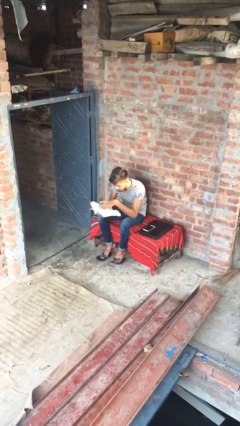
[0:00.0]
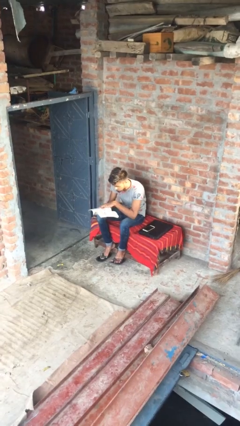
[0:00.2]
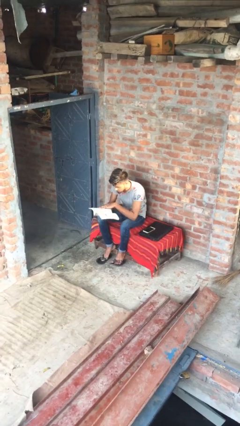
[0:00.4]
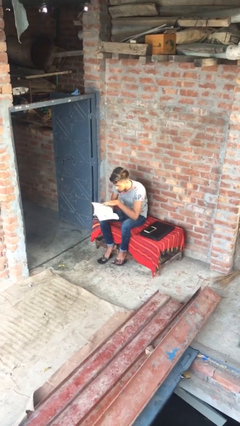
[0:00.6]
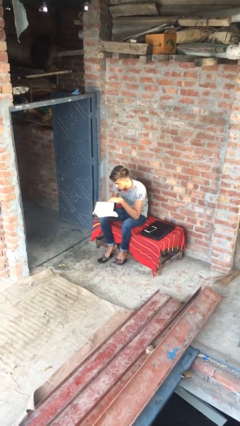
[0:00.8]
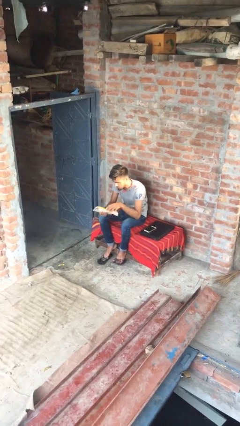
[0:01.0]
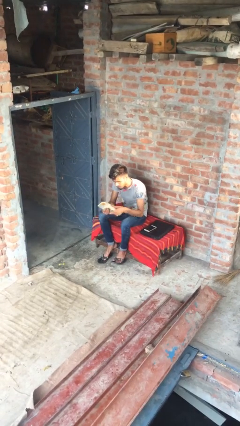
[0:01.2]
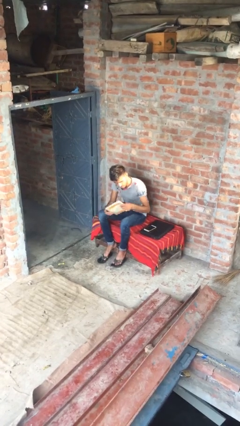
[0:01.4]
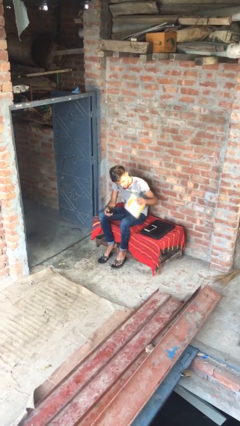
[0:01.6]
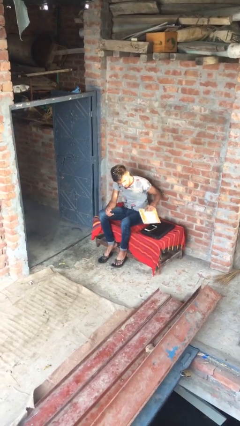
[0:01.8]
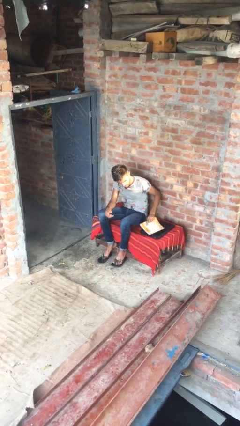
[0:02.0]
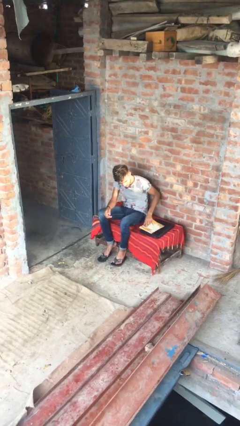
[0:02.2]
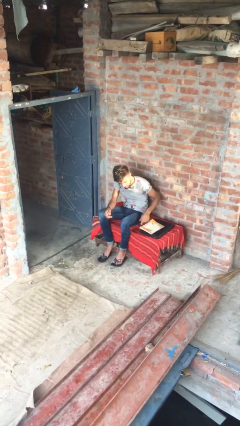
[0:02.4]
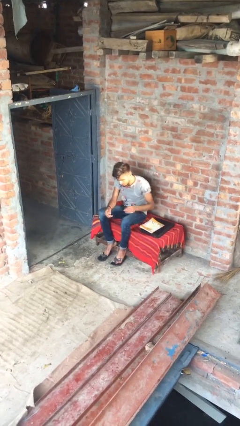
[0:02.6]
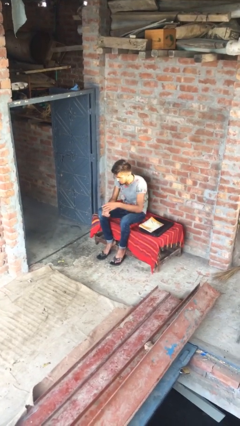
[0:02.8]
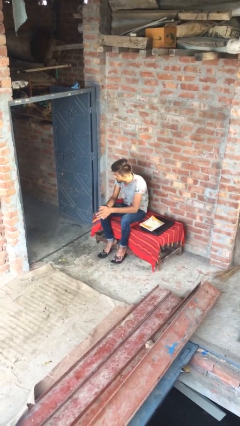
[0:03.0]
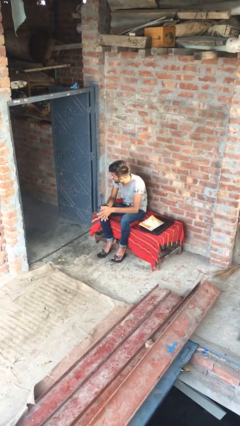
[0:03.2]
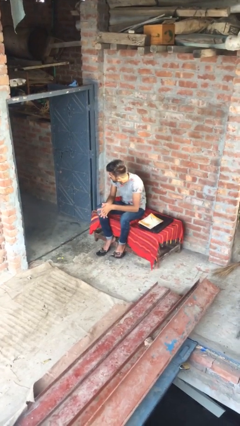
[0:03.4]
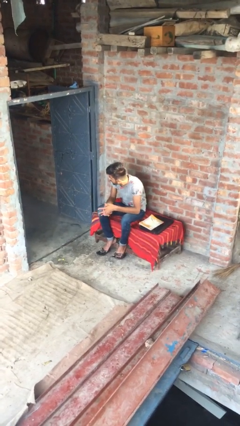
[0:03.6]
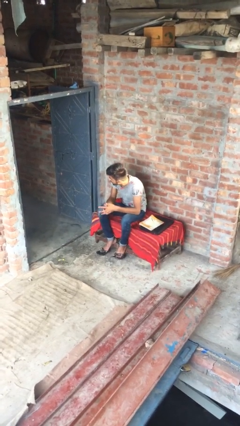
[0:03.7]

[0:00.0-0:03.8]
person puts down object on table

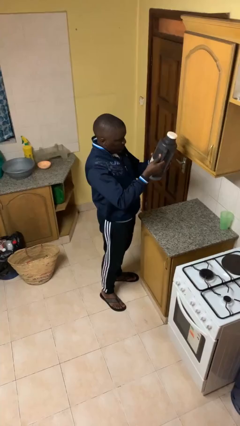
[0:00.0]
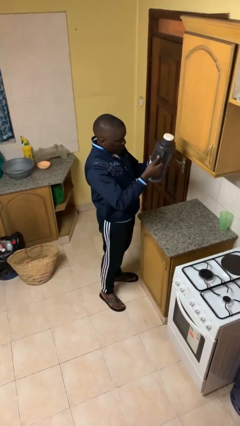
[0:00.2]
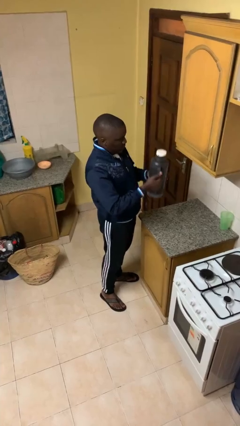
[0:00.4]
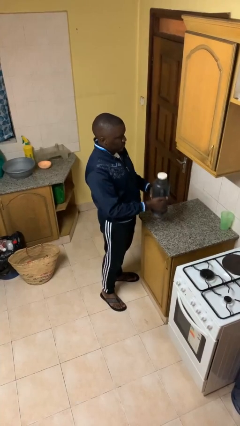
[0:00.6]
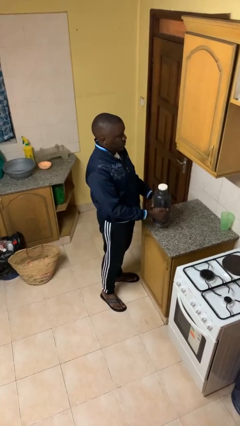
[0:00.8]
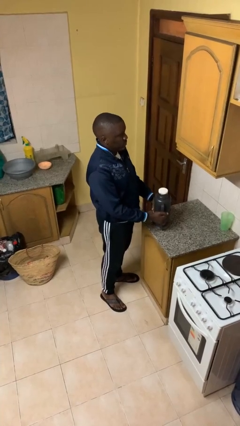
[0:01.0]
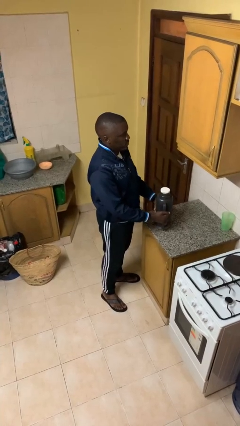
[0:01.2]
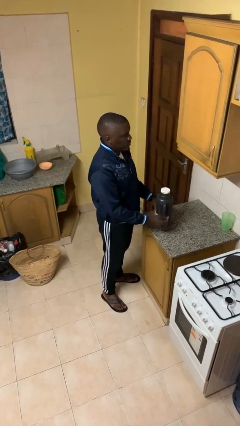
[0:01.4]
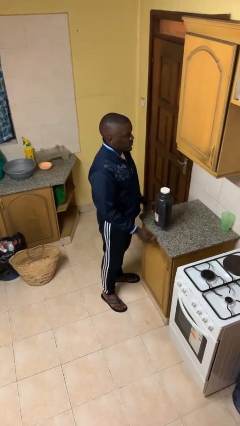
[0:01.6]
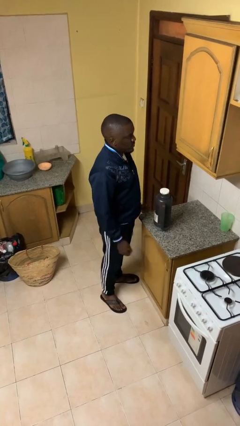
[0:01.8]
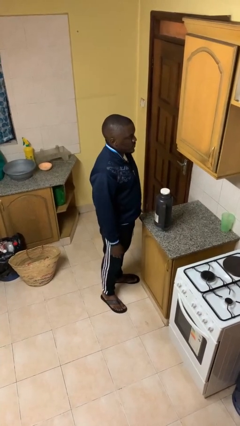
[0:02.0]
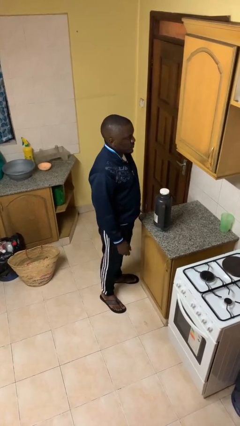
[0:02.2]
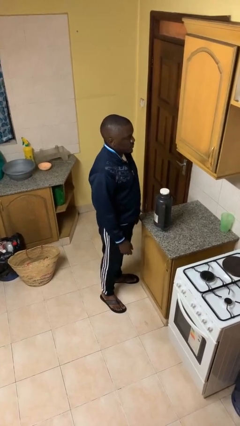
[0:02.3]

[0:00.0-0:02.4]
person puts down object on countertop

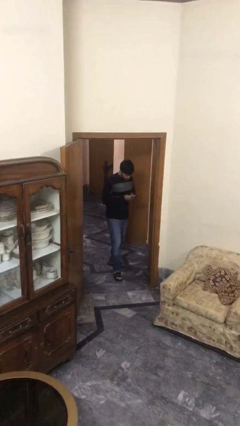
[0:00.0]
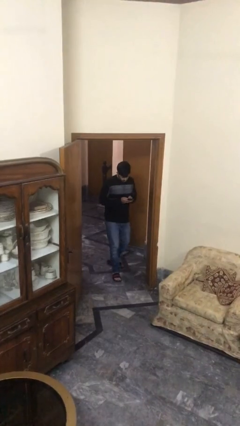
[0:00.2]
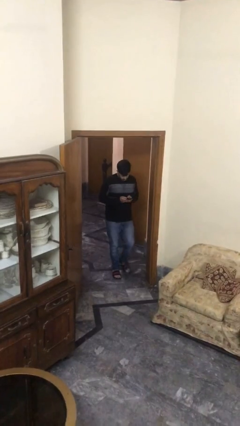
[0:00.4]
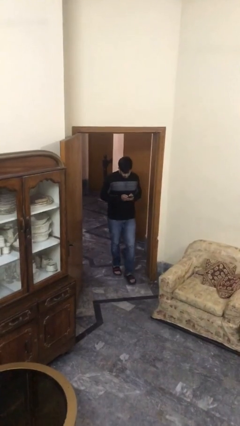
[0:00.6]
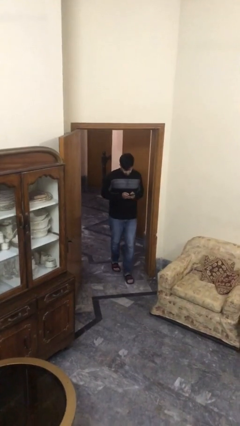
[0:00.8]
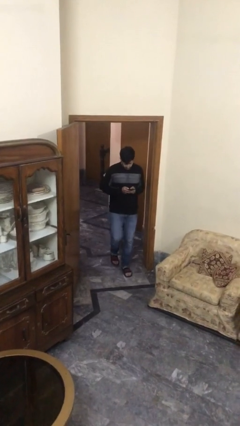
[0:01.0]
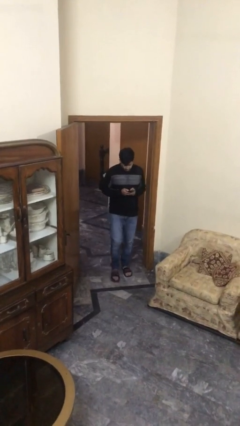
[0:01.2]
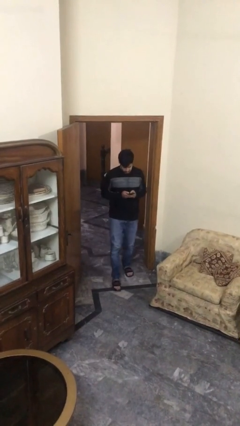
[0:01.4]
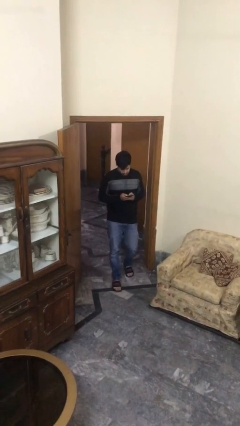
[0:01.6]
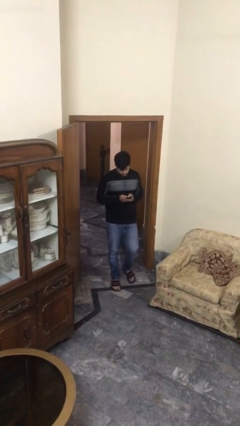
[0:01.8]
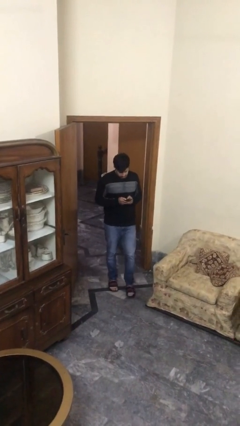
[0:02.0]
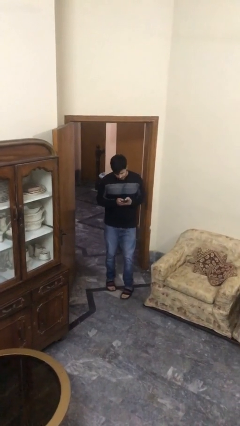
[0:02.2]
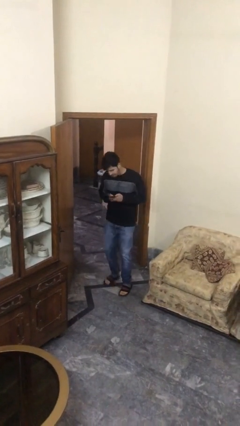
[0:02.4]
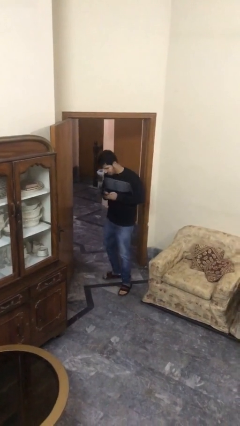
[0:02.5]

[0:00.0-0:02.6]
person enters scene through structure

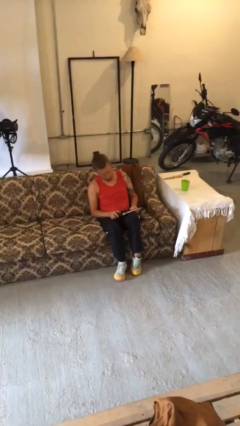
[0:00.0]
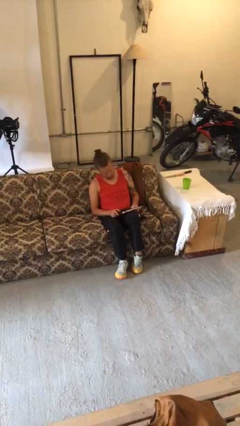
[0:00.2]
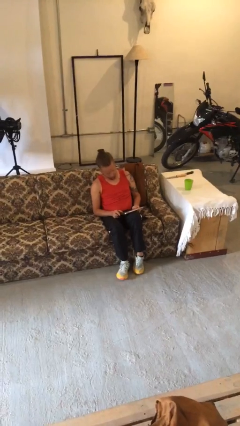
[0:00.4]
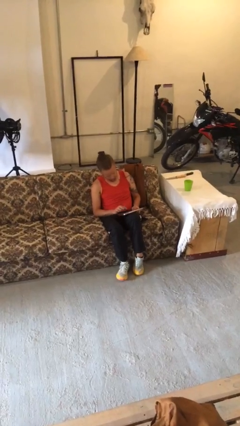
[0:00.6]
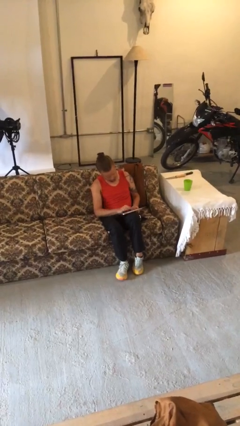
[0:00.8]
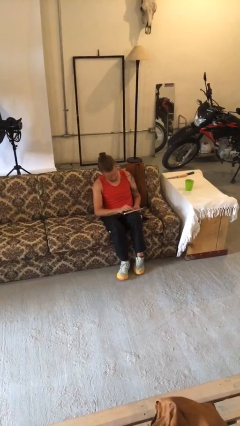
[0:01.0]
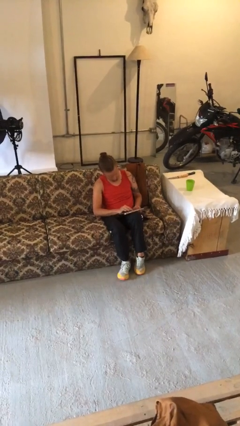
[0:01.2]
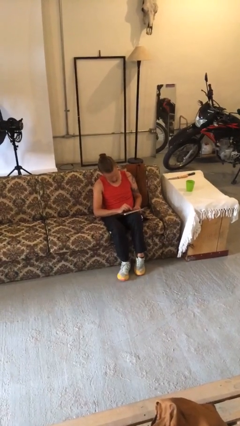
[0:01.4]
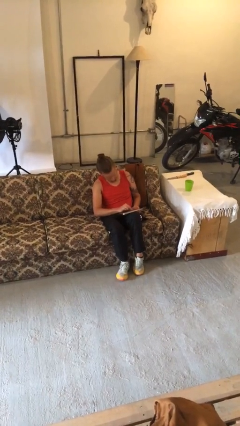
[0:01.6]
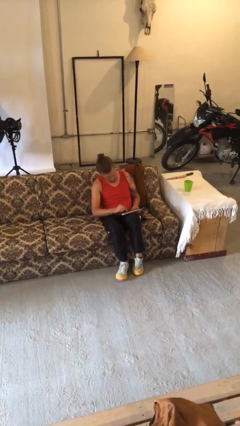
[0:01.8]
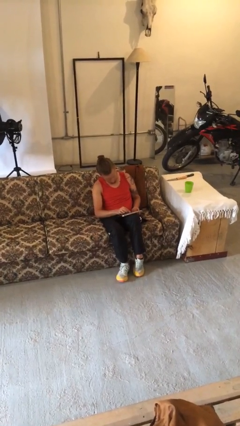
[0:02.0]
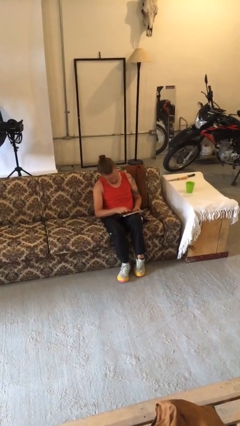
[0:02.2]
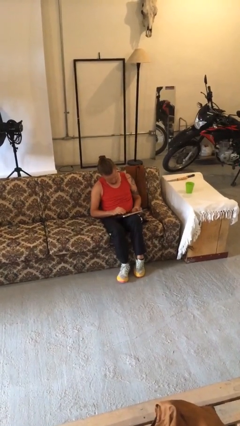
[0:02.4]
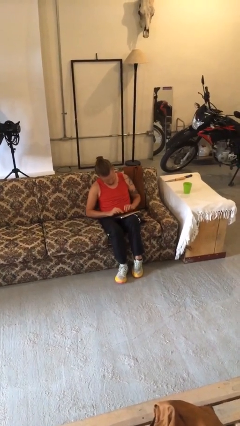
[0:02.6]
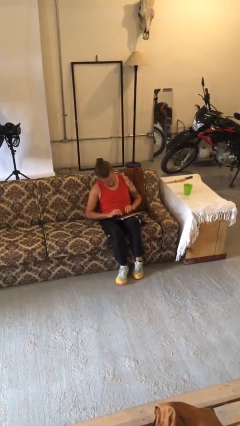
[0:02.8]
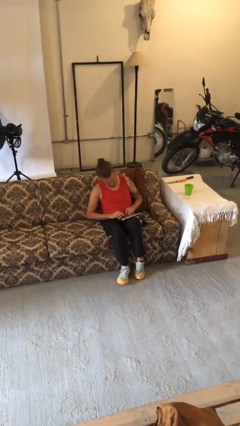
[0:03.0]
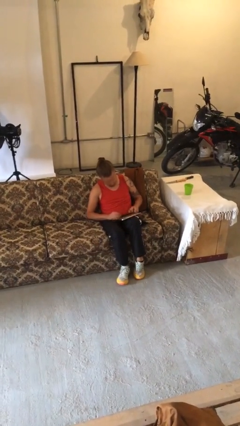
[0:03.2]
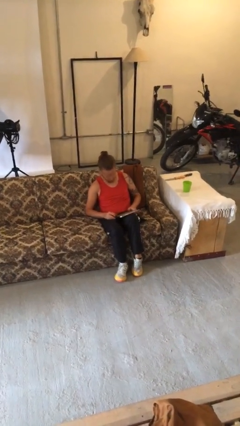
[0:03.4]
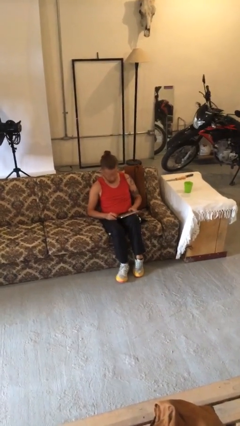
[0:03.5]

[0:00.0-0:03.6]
person interacts with tablet

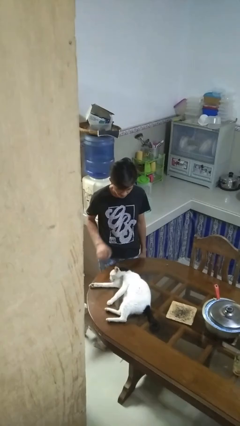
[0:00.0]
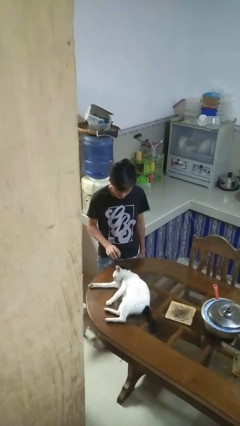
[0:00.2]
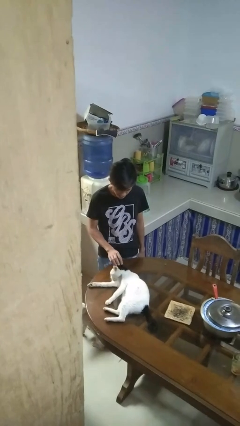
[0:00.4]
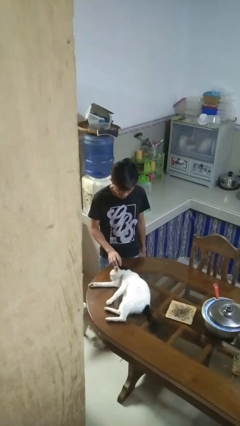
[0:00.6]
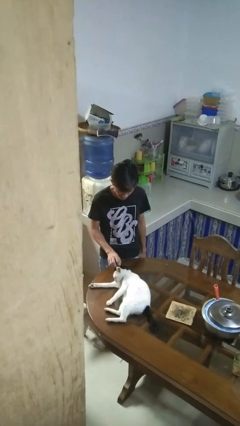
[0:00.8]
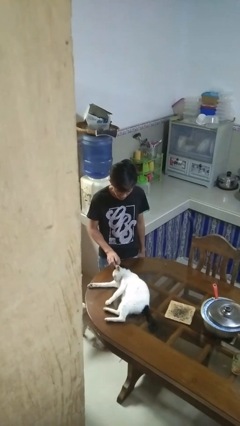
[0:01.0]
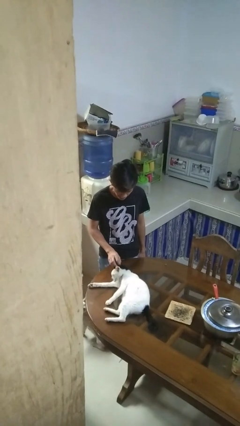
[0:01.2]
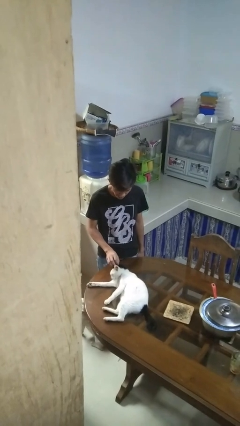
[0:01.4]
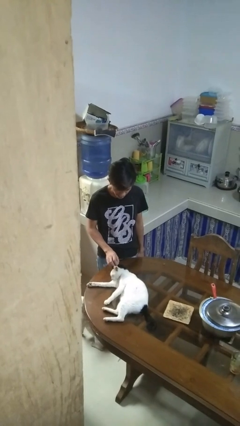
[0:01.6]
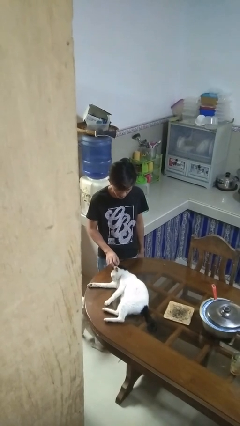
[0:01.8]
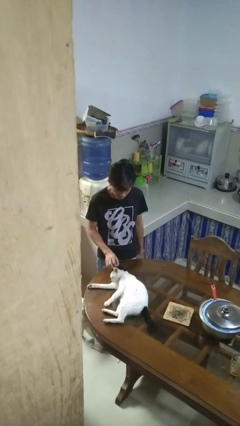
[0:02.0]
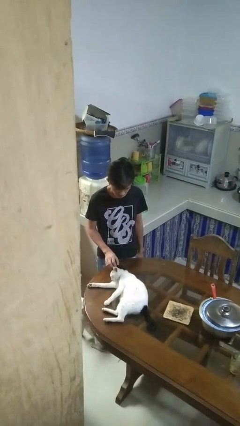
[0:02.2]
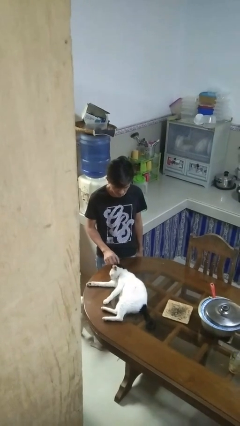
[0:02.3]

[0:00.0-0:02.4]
person pets cat

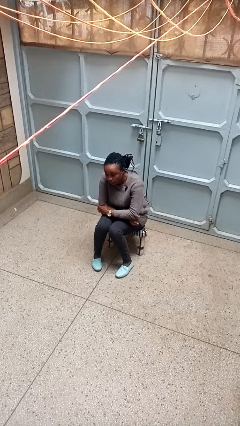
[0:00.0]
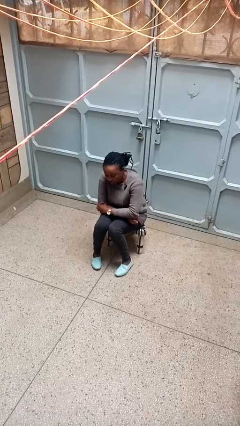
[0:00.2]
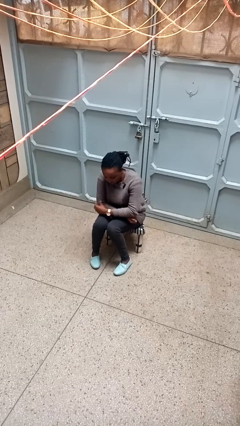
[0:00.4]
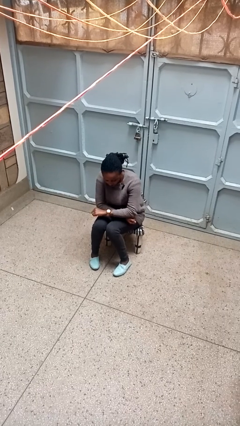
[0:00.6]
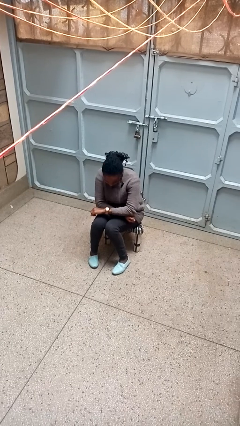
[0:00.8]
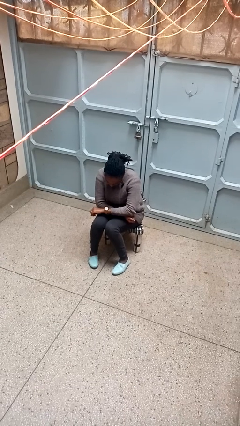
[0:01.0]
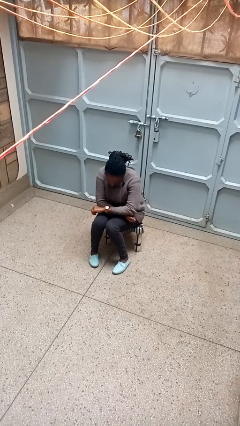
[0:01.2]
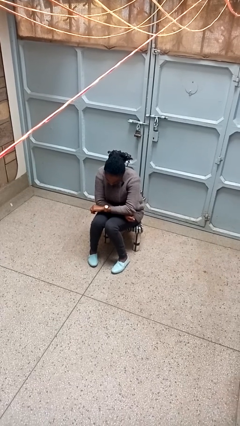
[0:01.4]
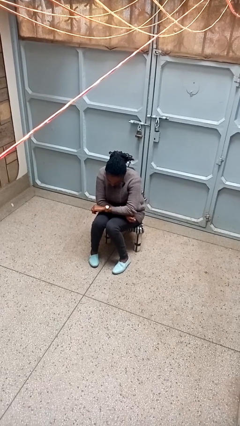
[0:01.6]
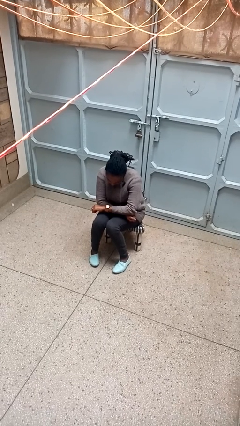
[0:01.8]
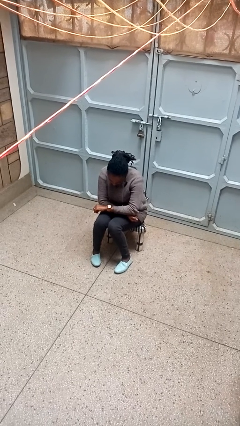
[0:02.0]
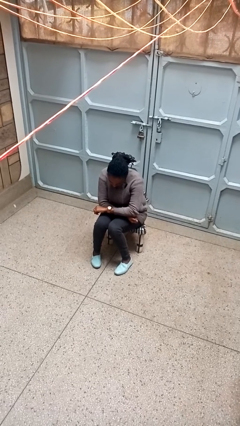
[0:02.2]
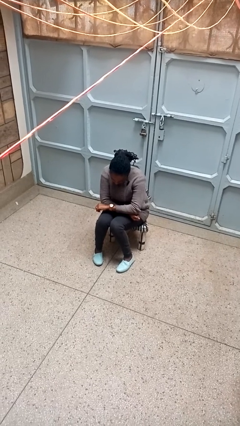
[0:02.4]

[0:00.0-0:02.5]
person looks at wristwatch

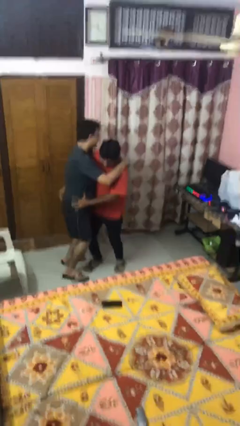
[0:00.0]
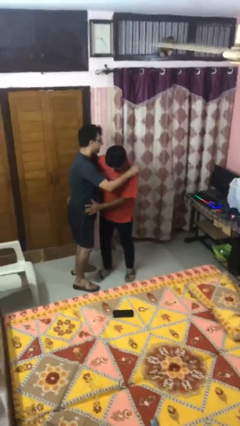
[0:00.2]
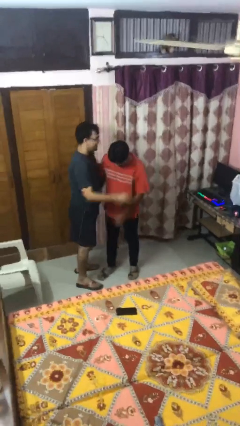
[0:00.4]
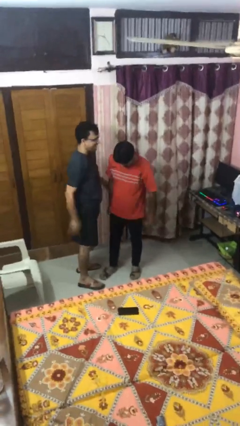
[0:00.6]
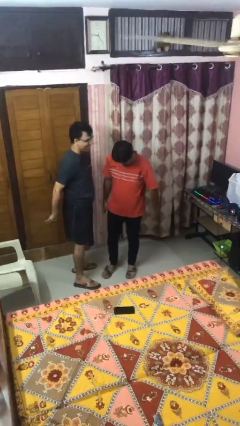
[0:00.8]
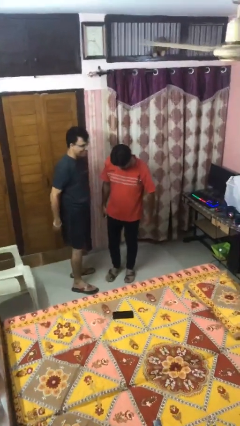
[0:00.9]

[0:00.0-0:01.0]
person puts down person
